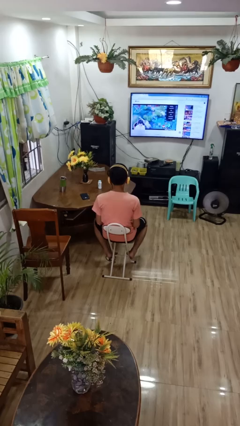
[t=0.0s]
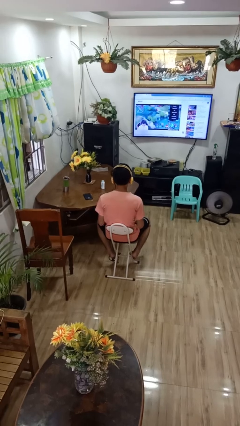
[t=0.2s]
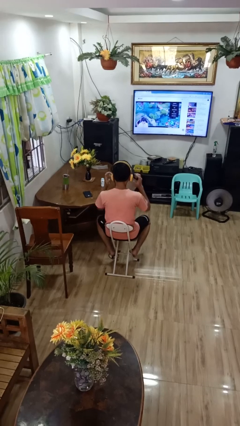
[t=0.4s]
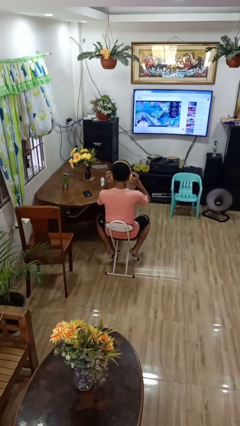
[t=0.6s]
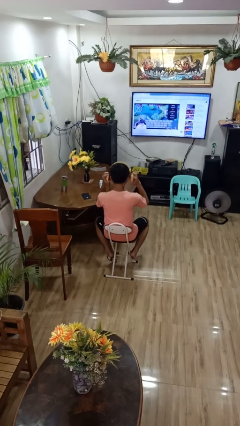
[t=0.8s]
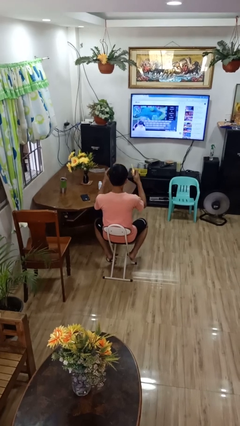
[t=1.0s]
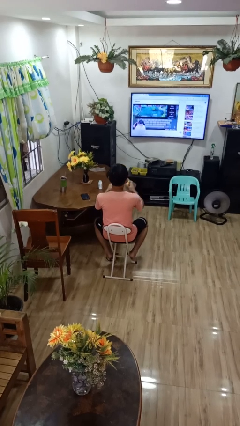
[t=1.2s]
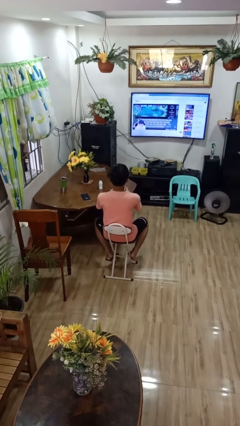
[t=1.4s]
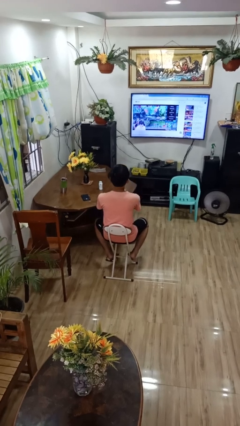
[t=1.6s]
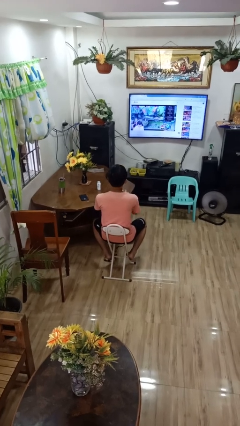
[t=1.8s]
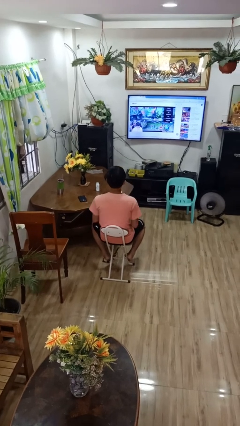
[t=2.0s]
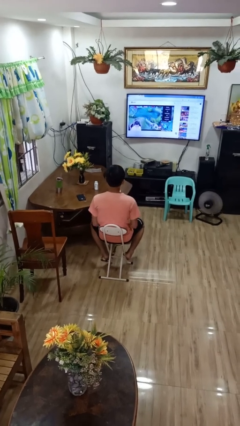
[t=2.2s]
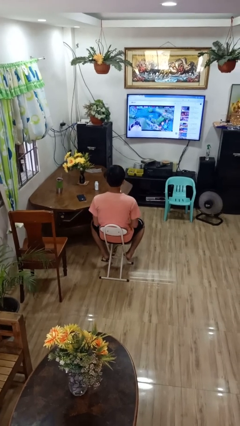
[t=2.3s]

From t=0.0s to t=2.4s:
person takes off headphones

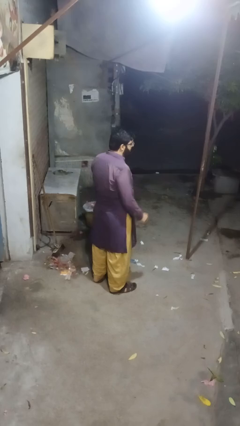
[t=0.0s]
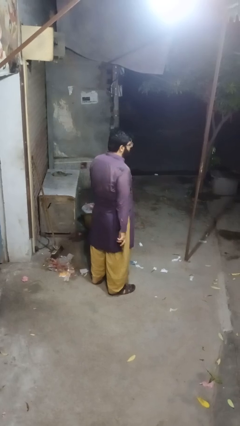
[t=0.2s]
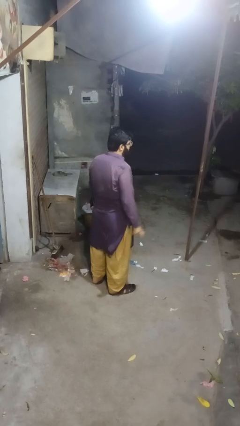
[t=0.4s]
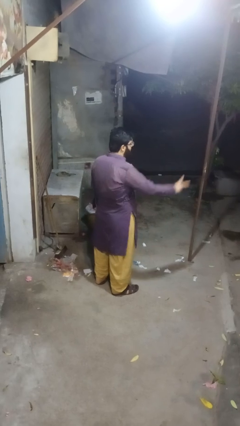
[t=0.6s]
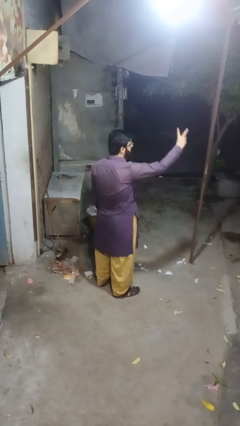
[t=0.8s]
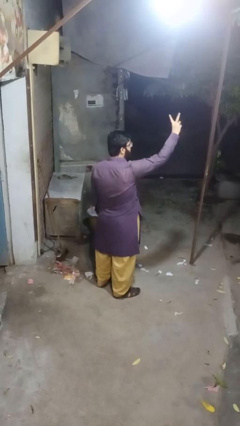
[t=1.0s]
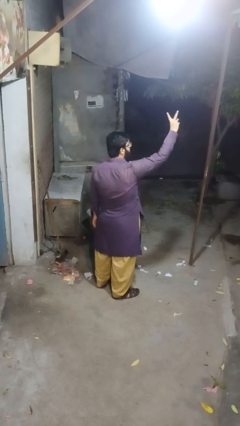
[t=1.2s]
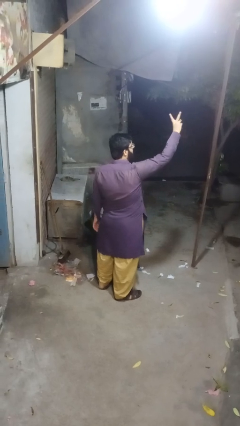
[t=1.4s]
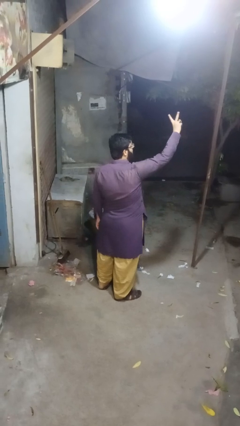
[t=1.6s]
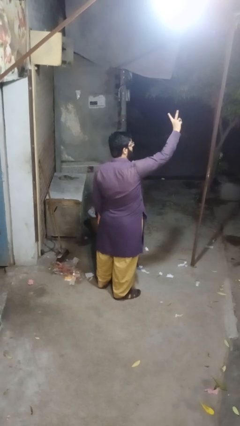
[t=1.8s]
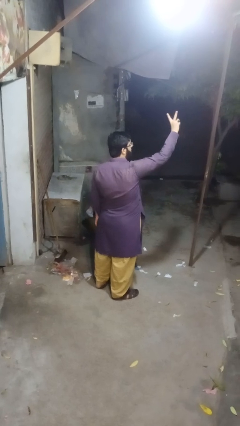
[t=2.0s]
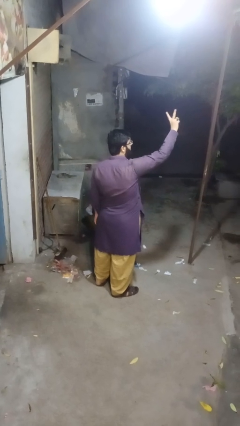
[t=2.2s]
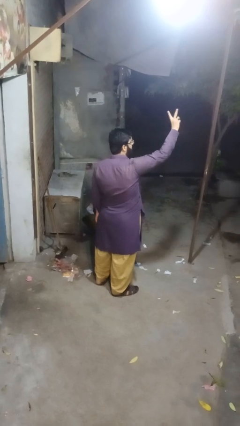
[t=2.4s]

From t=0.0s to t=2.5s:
person gestures peace

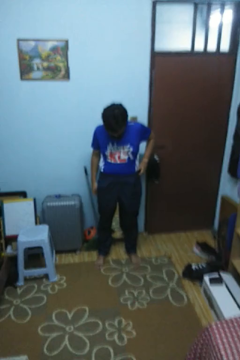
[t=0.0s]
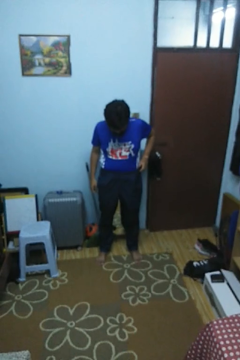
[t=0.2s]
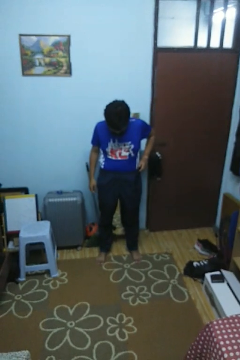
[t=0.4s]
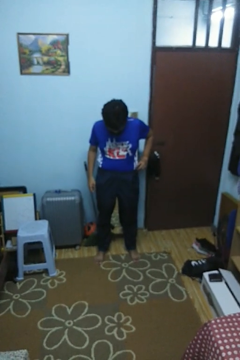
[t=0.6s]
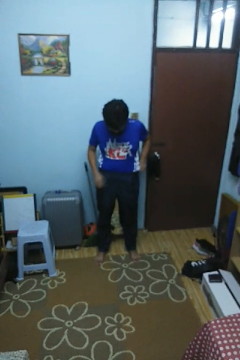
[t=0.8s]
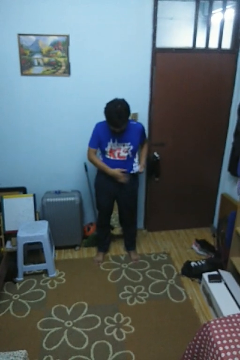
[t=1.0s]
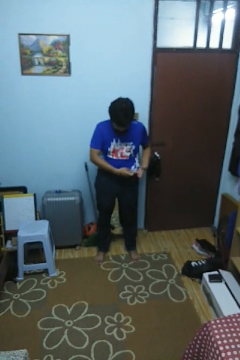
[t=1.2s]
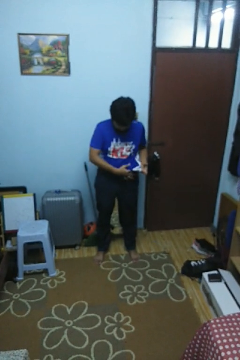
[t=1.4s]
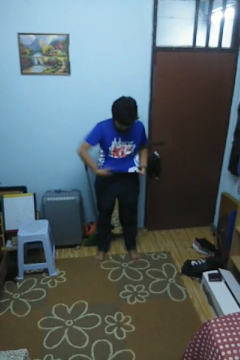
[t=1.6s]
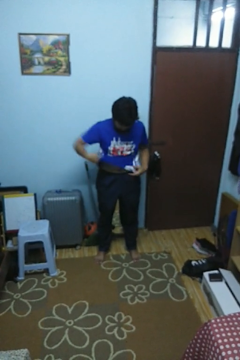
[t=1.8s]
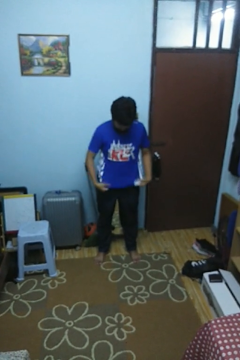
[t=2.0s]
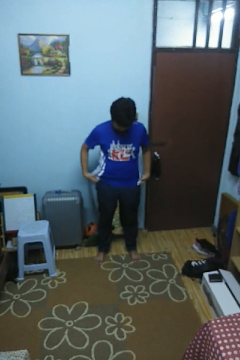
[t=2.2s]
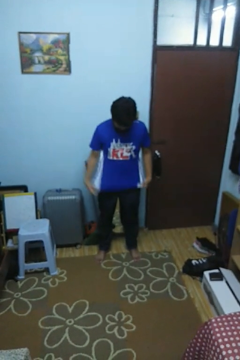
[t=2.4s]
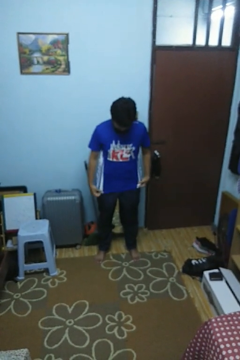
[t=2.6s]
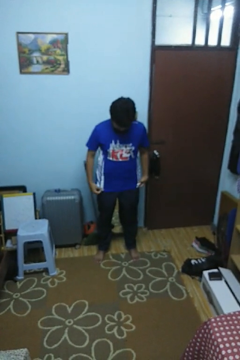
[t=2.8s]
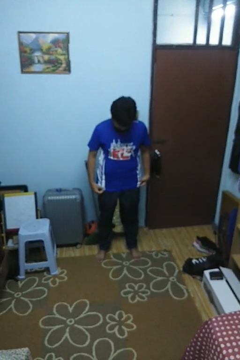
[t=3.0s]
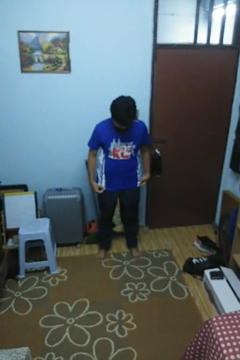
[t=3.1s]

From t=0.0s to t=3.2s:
person untucks shirt

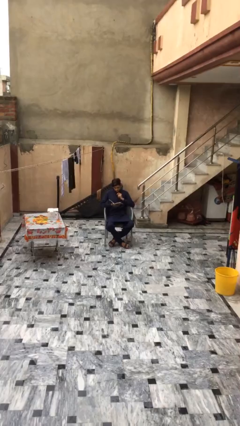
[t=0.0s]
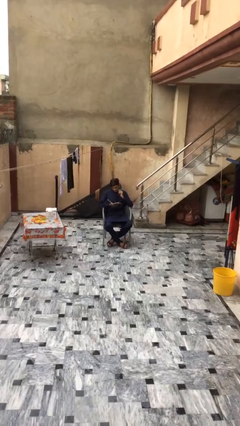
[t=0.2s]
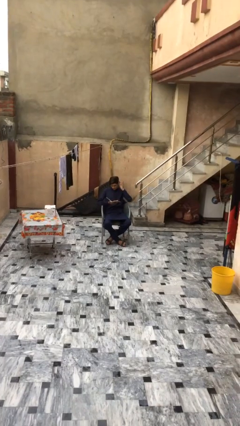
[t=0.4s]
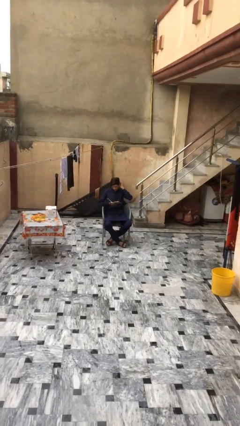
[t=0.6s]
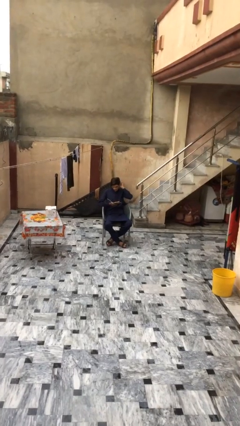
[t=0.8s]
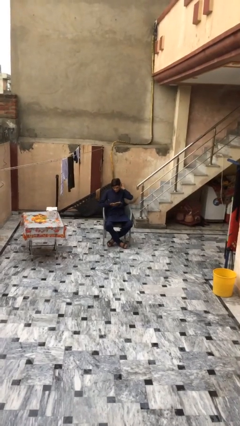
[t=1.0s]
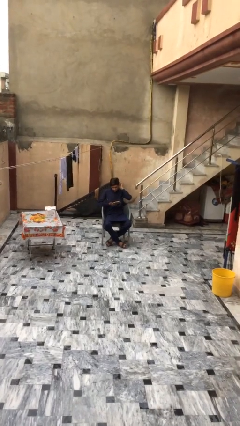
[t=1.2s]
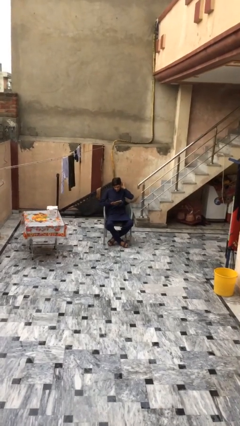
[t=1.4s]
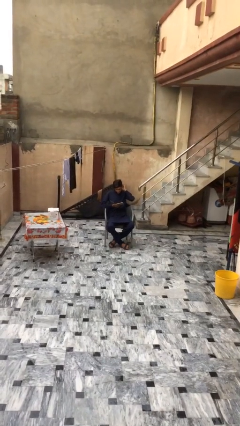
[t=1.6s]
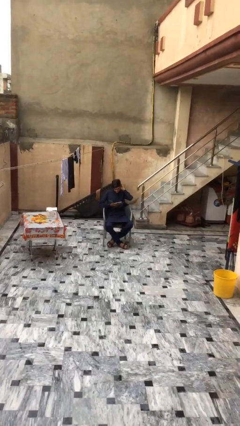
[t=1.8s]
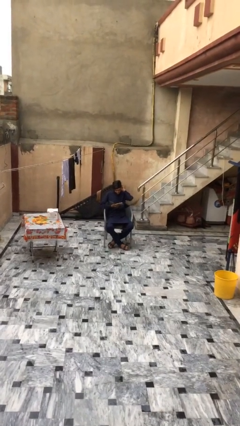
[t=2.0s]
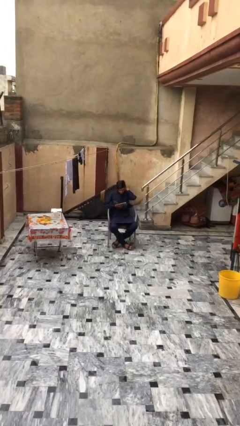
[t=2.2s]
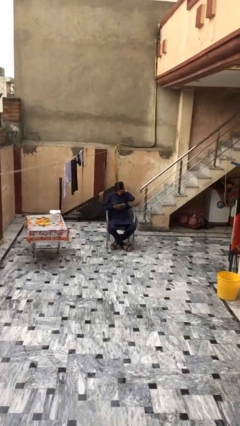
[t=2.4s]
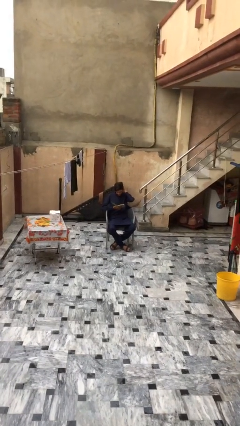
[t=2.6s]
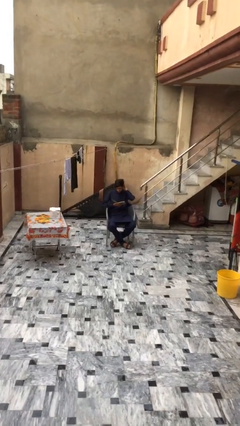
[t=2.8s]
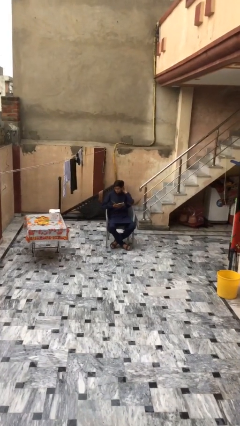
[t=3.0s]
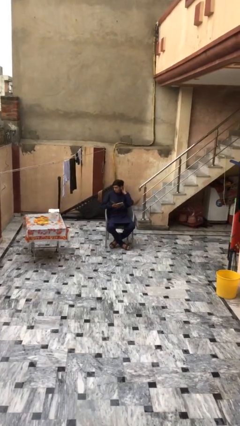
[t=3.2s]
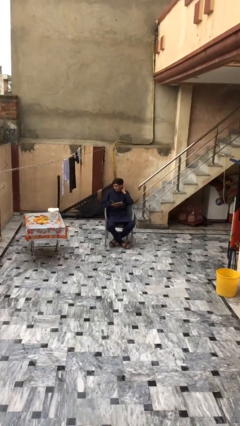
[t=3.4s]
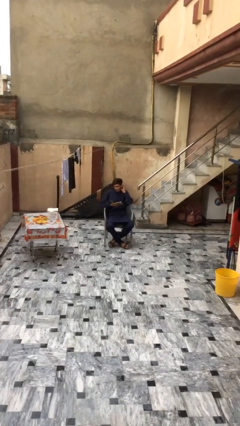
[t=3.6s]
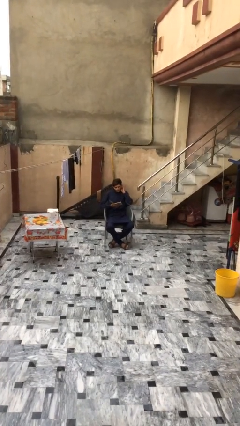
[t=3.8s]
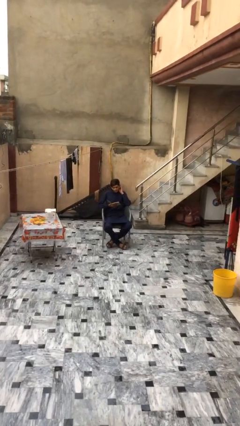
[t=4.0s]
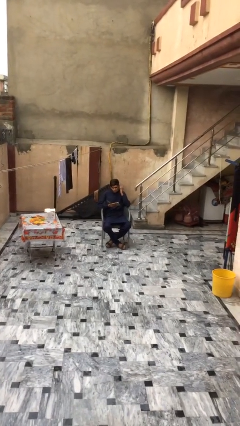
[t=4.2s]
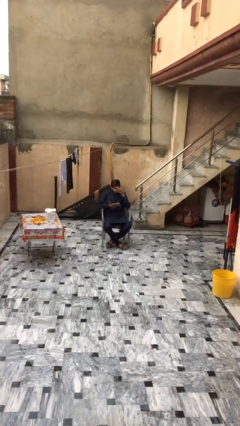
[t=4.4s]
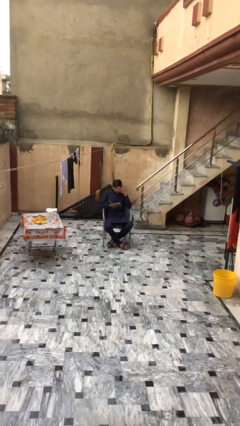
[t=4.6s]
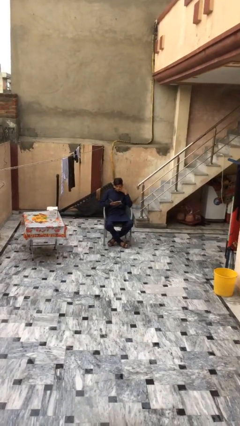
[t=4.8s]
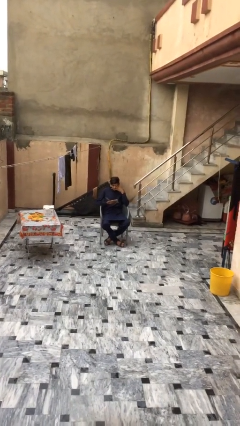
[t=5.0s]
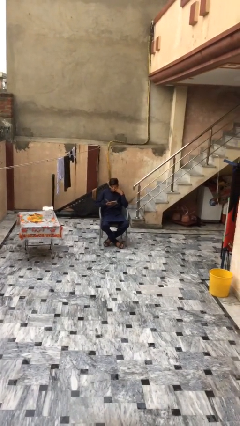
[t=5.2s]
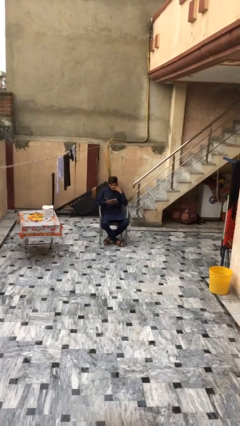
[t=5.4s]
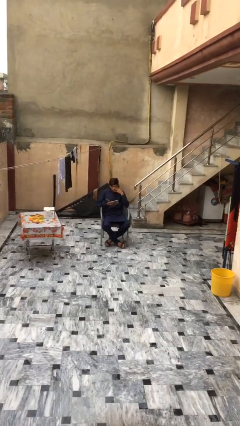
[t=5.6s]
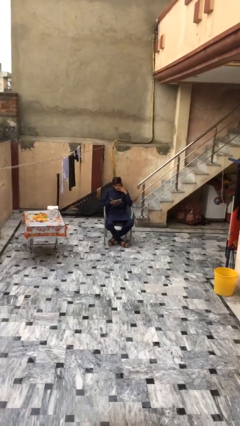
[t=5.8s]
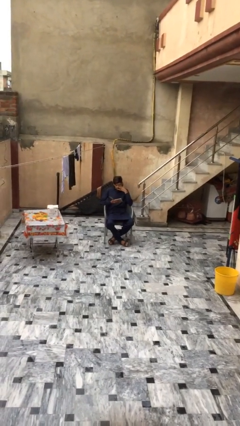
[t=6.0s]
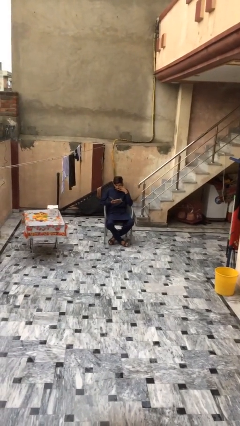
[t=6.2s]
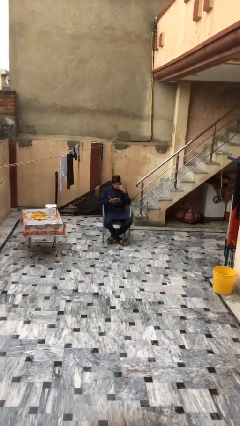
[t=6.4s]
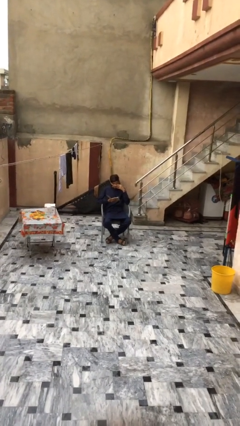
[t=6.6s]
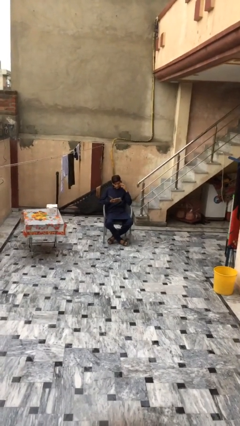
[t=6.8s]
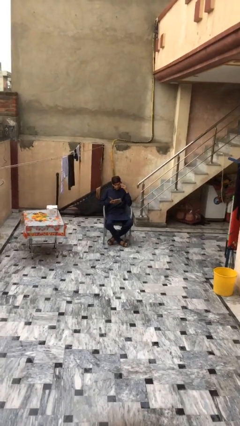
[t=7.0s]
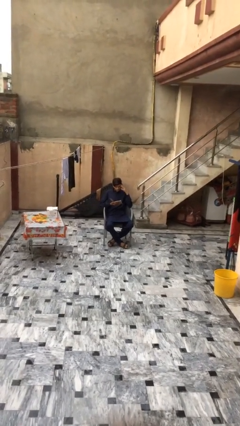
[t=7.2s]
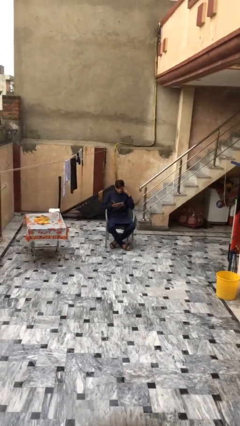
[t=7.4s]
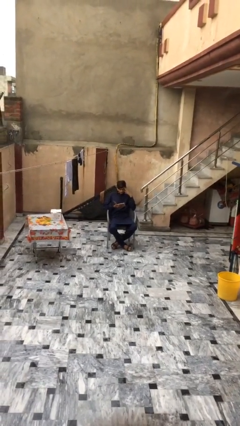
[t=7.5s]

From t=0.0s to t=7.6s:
person reads document

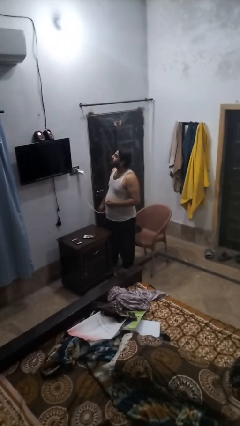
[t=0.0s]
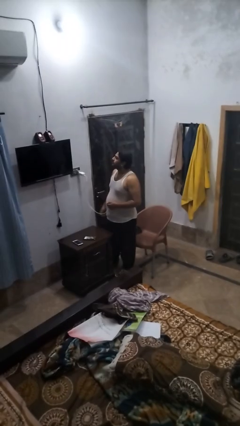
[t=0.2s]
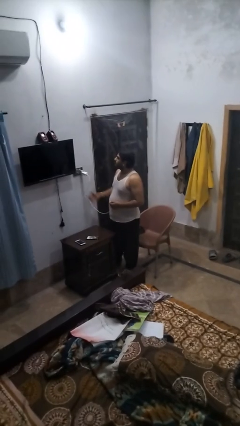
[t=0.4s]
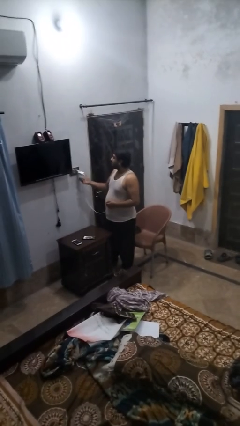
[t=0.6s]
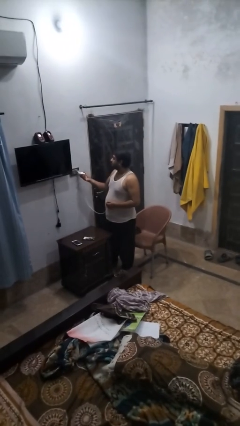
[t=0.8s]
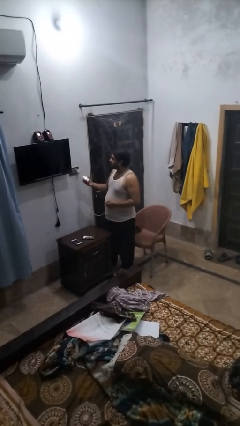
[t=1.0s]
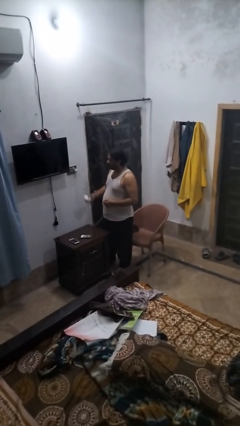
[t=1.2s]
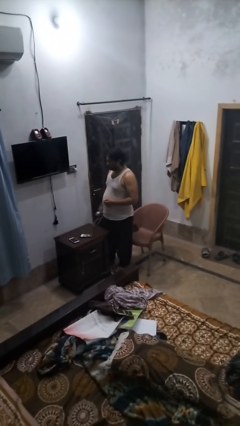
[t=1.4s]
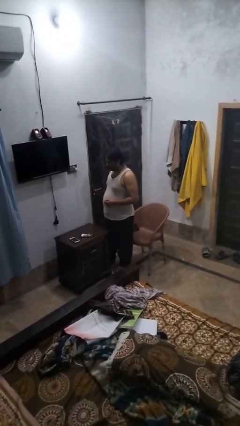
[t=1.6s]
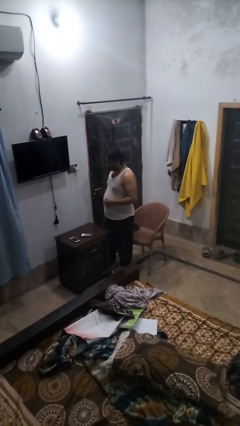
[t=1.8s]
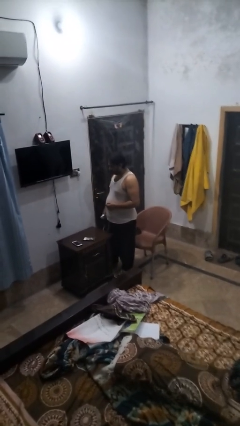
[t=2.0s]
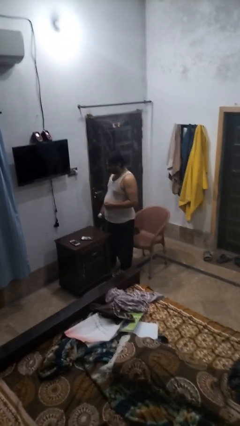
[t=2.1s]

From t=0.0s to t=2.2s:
person unplugs from electrical socket

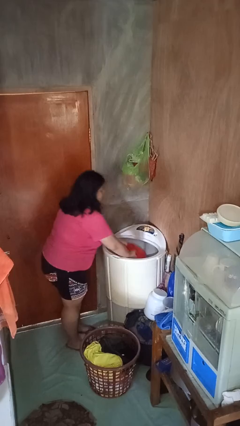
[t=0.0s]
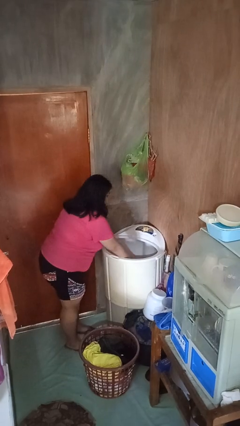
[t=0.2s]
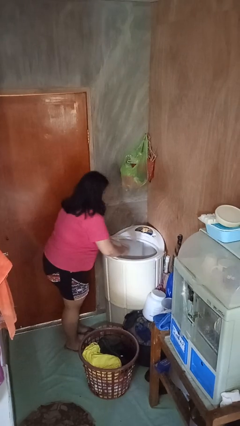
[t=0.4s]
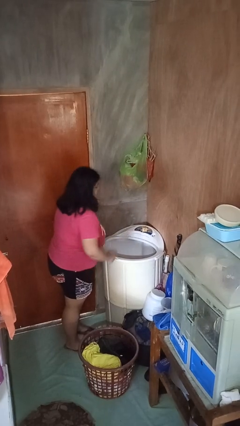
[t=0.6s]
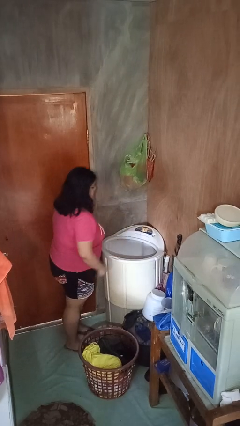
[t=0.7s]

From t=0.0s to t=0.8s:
person loads dryer
